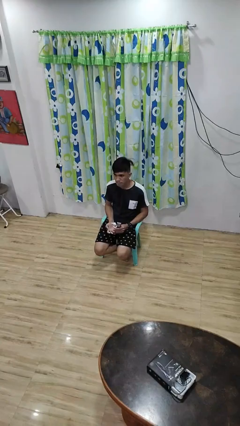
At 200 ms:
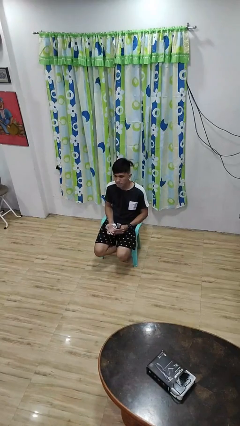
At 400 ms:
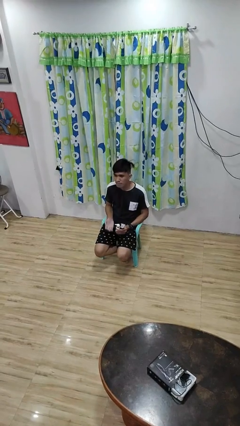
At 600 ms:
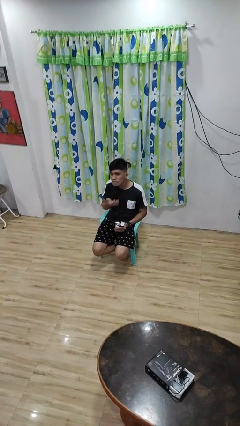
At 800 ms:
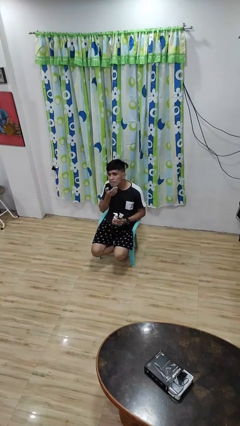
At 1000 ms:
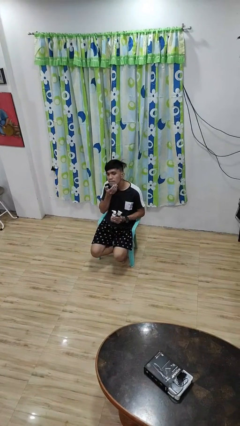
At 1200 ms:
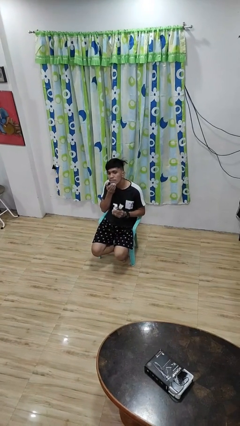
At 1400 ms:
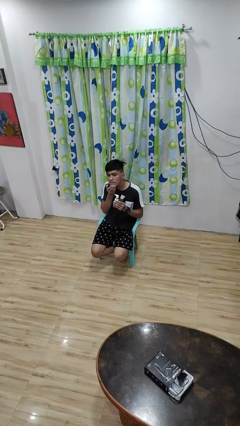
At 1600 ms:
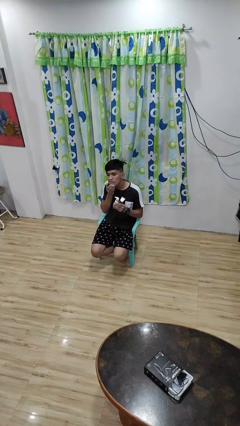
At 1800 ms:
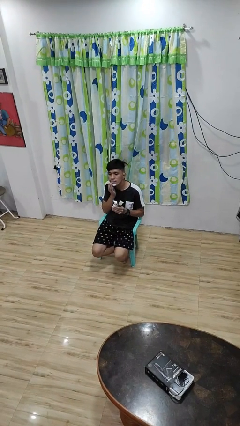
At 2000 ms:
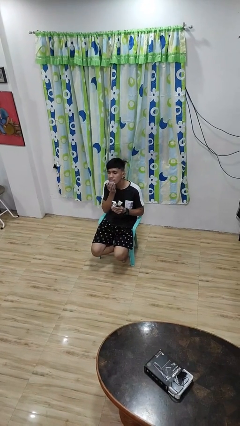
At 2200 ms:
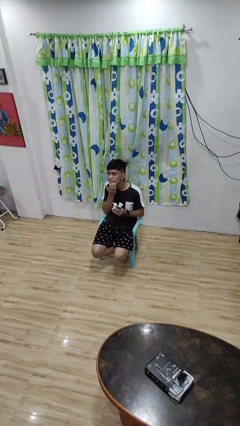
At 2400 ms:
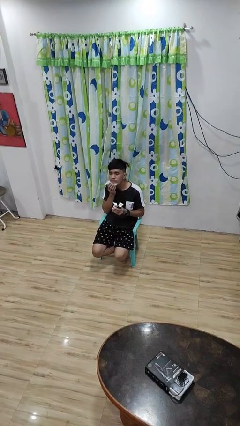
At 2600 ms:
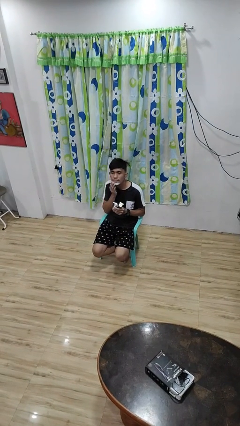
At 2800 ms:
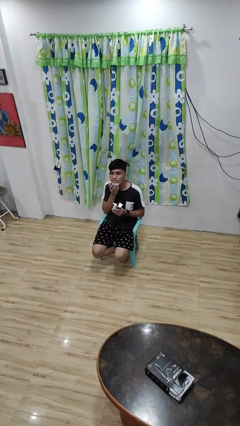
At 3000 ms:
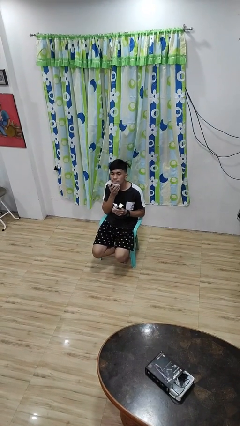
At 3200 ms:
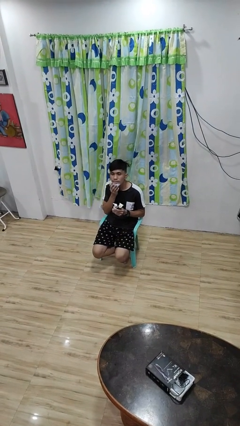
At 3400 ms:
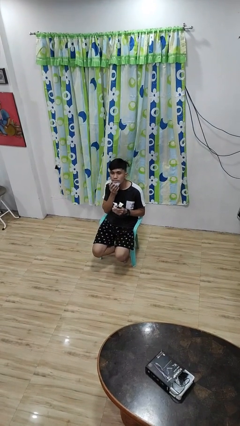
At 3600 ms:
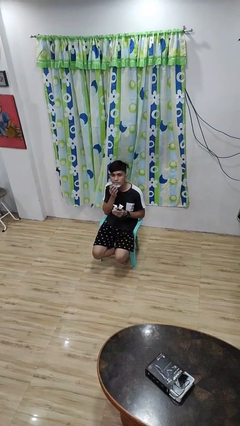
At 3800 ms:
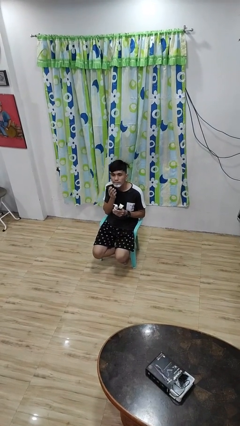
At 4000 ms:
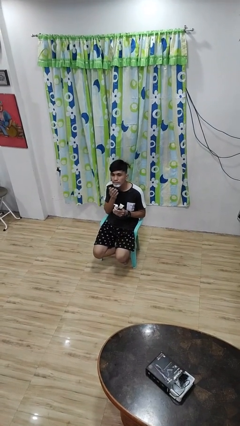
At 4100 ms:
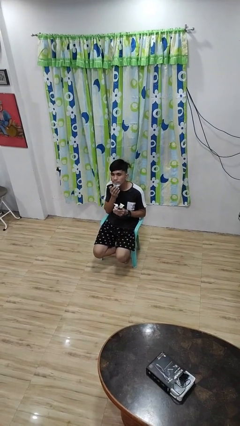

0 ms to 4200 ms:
person applies shaving cream

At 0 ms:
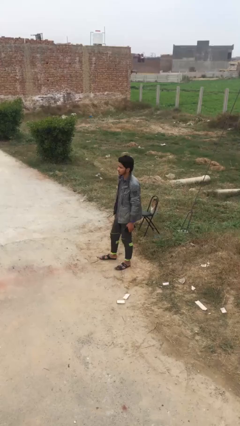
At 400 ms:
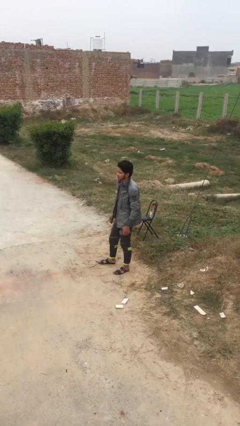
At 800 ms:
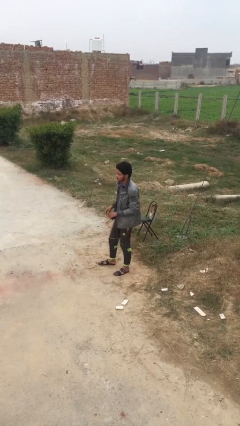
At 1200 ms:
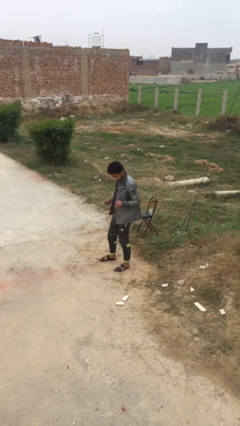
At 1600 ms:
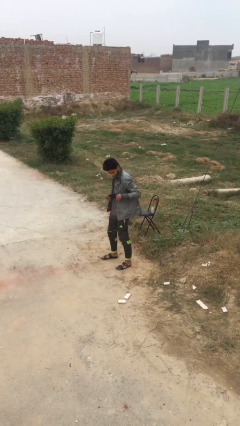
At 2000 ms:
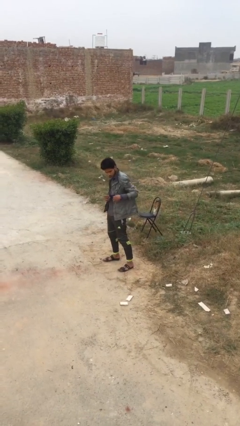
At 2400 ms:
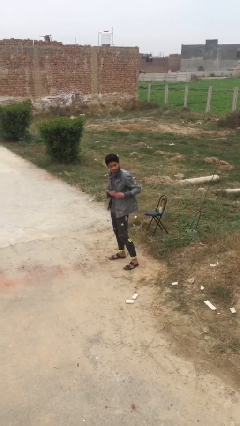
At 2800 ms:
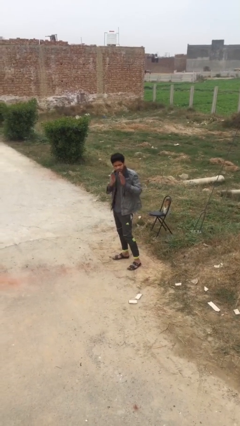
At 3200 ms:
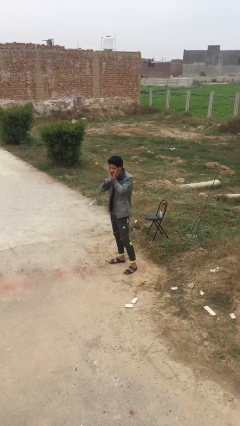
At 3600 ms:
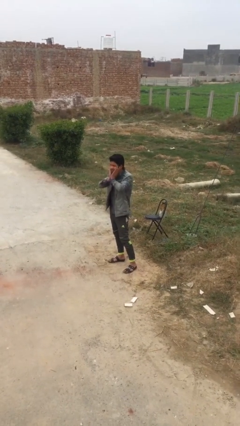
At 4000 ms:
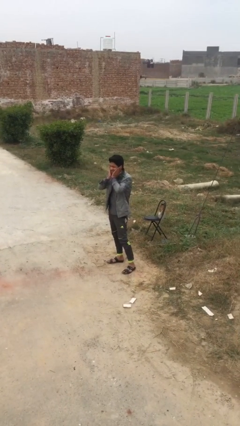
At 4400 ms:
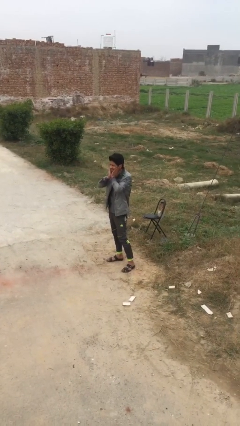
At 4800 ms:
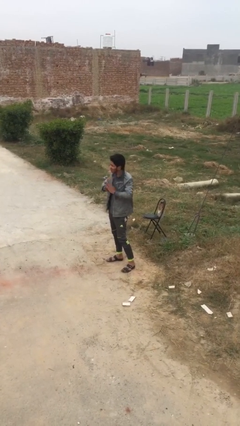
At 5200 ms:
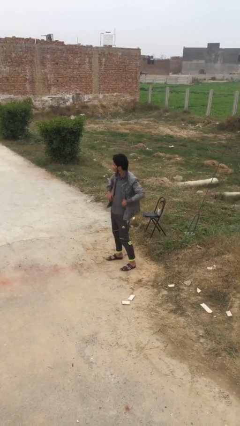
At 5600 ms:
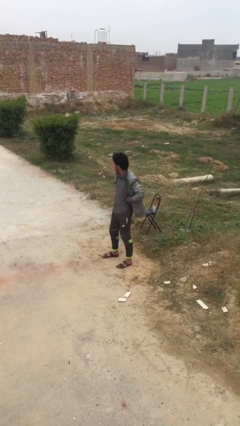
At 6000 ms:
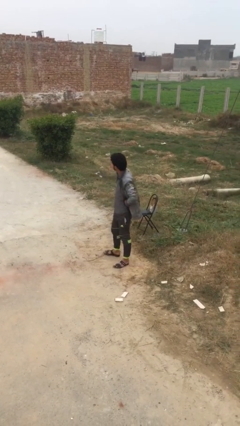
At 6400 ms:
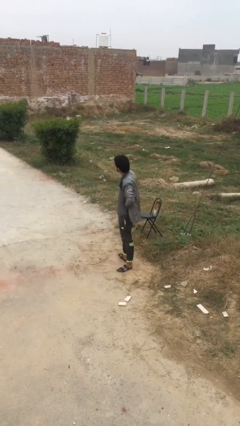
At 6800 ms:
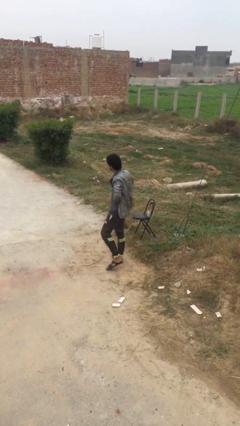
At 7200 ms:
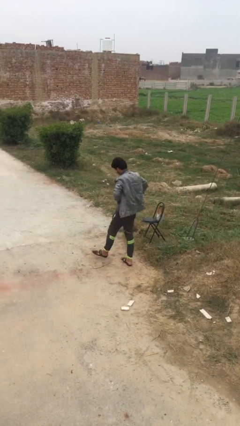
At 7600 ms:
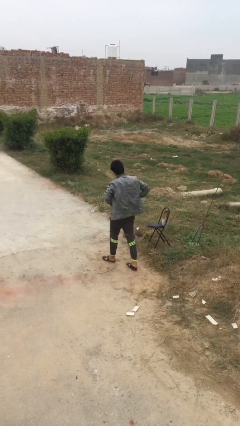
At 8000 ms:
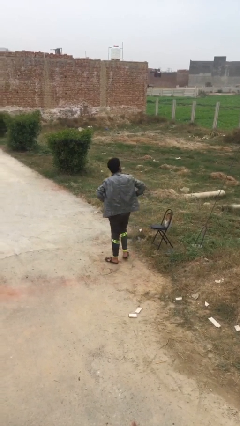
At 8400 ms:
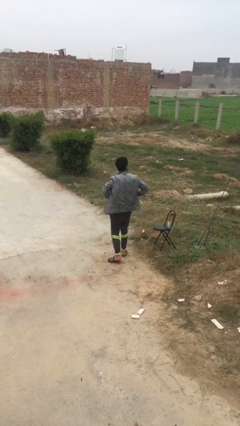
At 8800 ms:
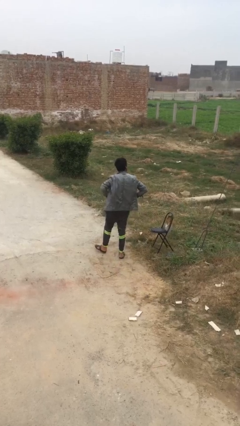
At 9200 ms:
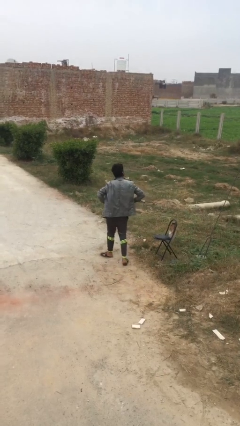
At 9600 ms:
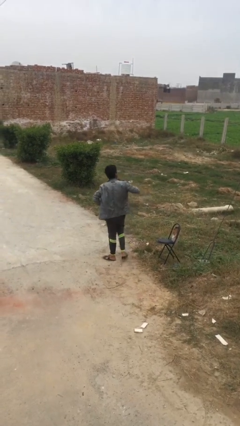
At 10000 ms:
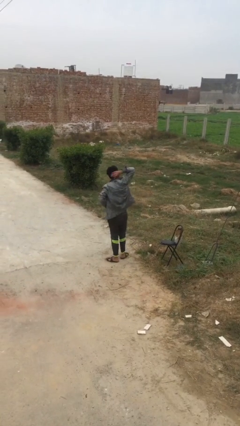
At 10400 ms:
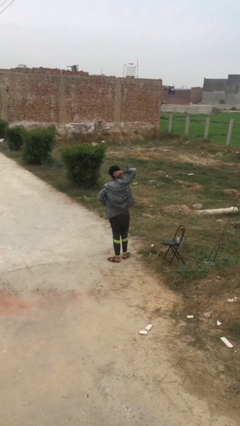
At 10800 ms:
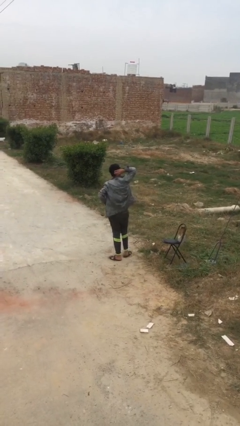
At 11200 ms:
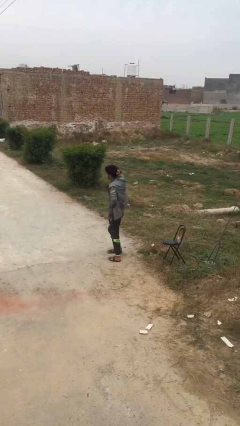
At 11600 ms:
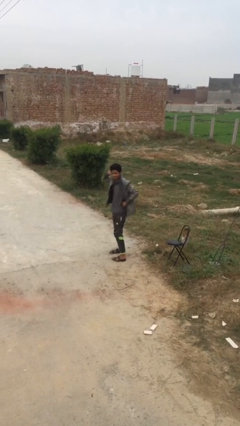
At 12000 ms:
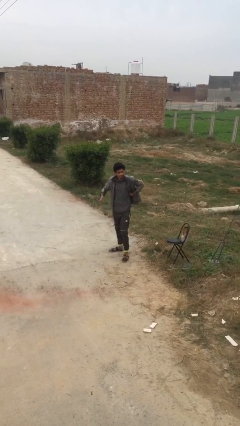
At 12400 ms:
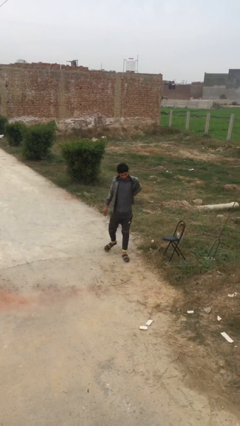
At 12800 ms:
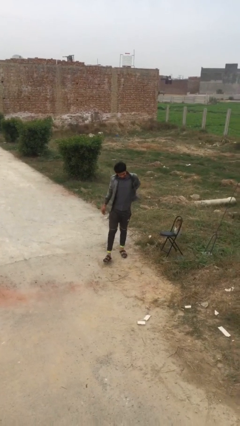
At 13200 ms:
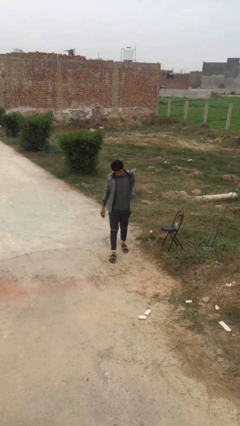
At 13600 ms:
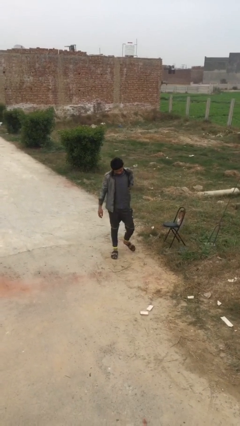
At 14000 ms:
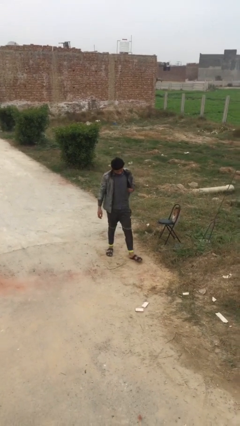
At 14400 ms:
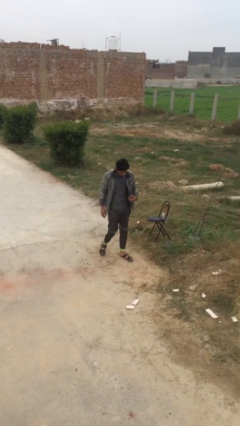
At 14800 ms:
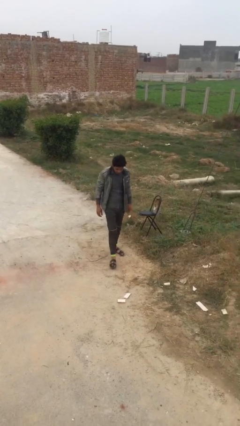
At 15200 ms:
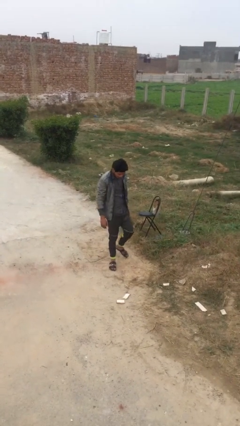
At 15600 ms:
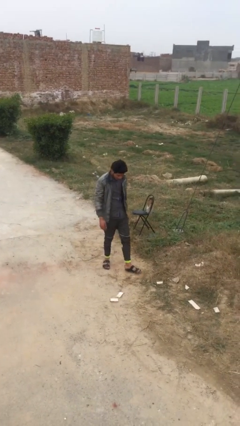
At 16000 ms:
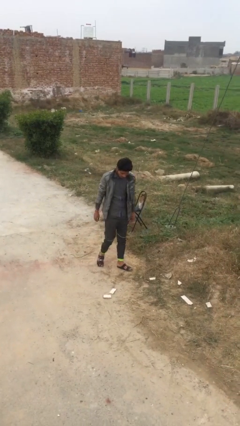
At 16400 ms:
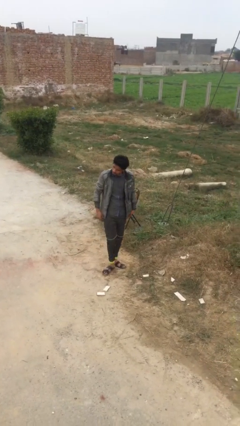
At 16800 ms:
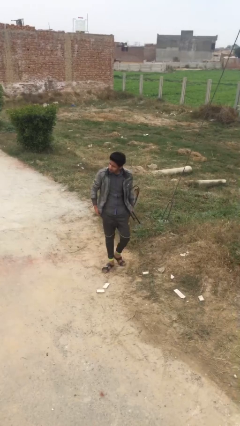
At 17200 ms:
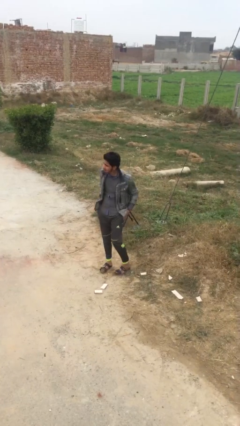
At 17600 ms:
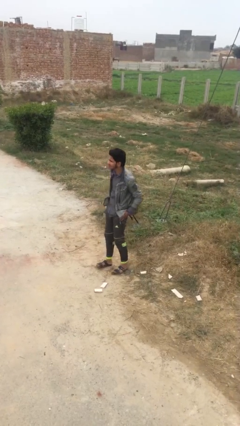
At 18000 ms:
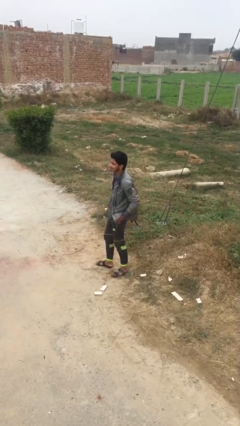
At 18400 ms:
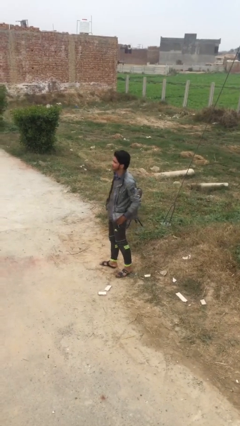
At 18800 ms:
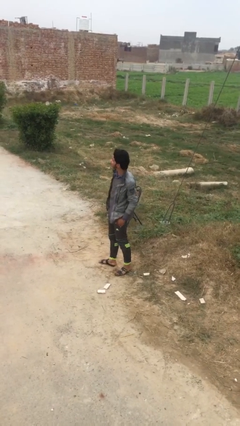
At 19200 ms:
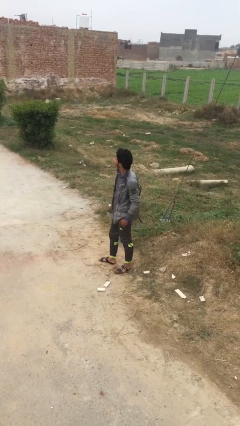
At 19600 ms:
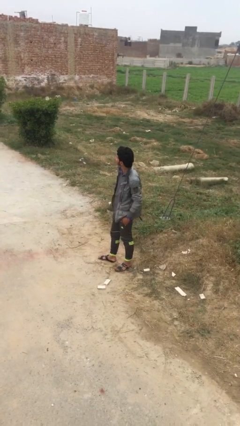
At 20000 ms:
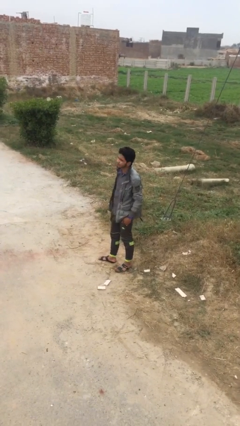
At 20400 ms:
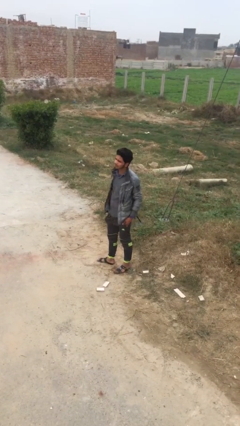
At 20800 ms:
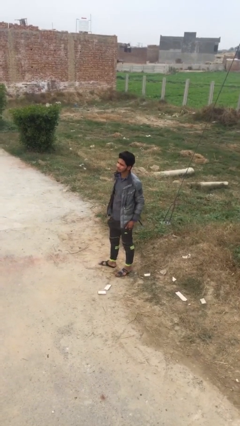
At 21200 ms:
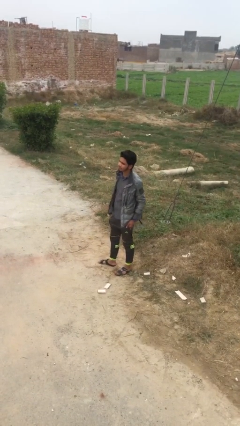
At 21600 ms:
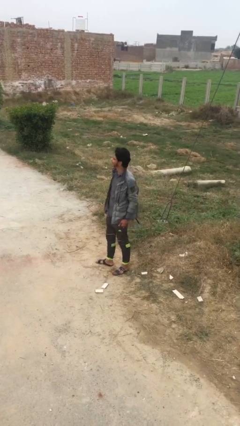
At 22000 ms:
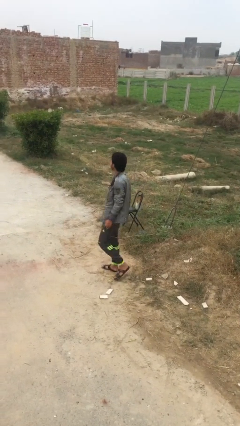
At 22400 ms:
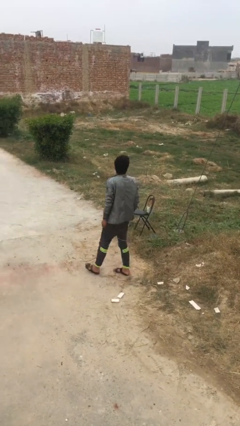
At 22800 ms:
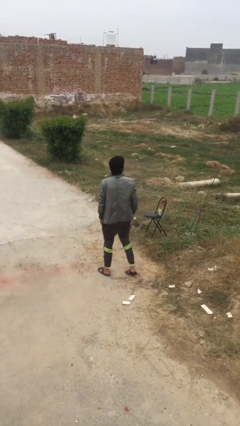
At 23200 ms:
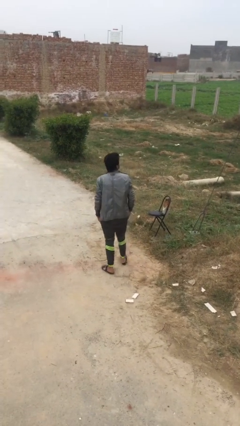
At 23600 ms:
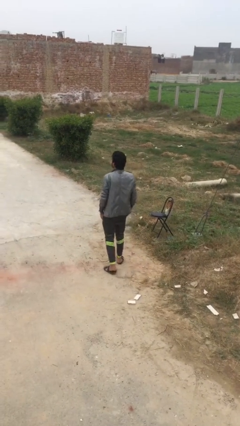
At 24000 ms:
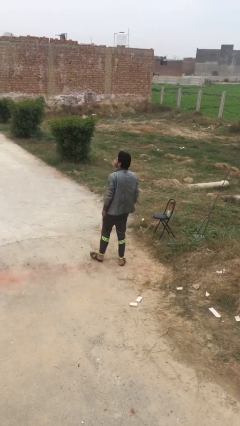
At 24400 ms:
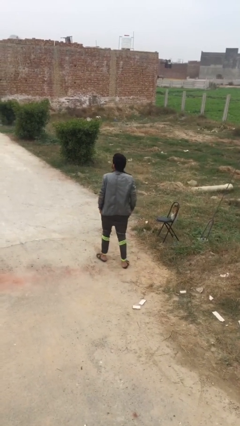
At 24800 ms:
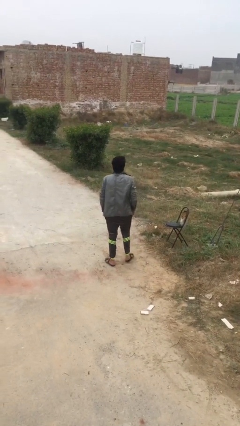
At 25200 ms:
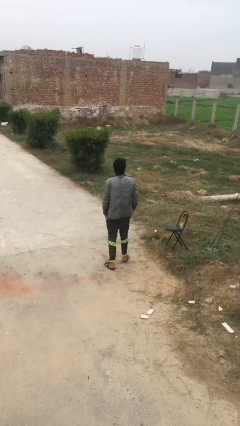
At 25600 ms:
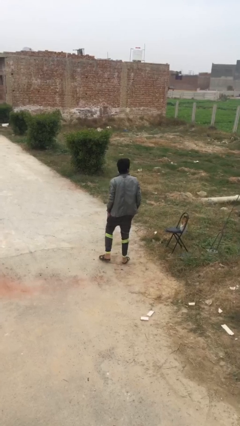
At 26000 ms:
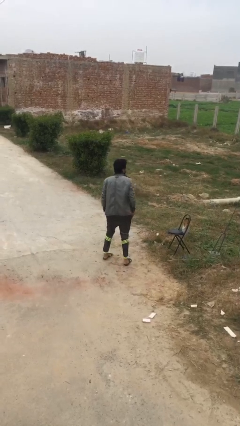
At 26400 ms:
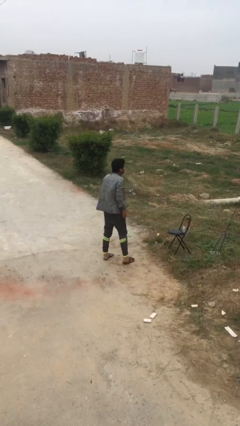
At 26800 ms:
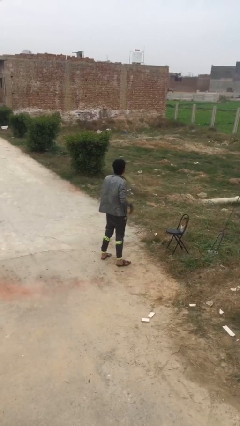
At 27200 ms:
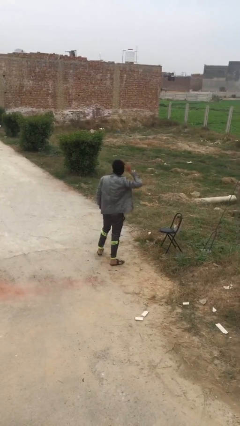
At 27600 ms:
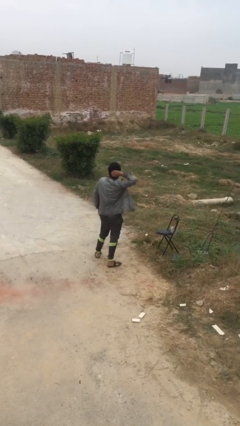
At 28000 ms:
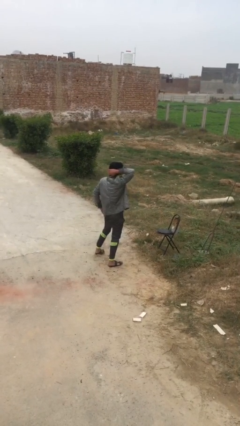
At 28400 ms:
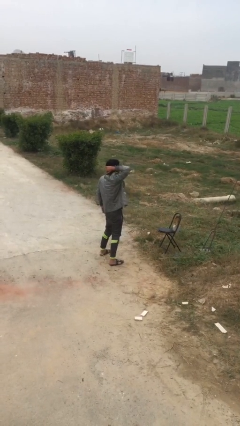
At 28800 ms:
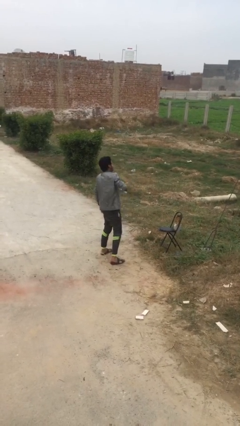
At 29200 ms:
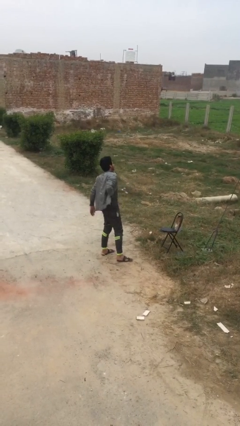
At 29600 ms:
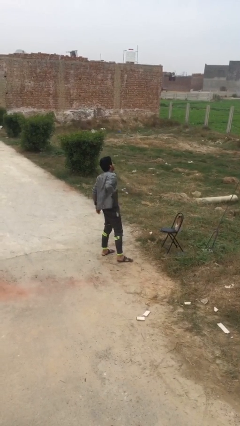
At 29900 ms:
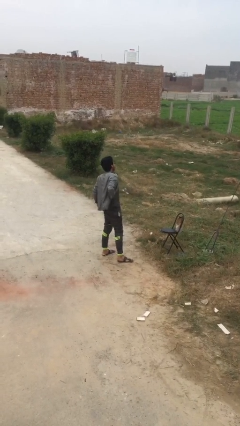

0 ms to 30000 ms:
person walks
